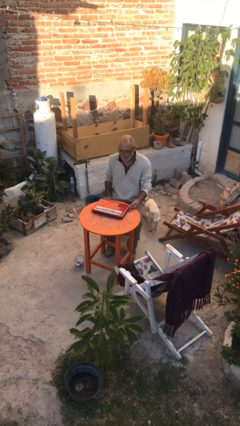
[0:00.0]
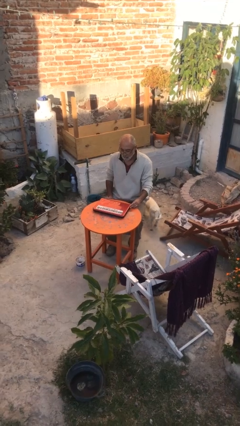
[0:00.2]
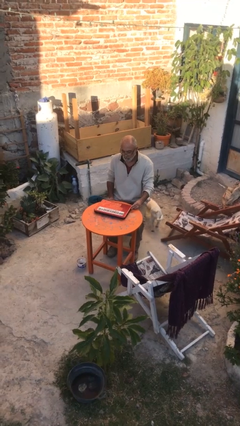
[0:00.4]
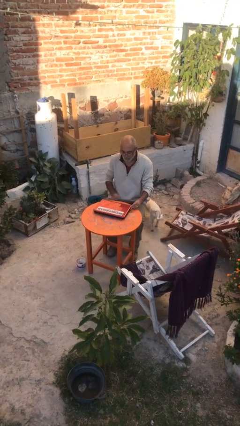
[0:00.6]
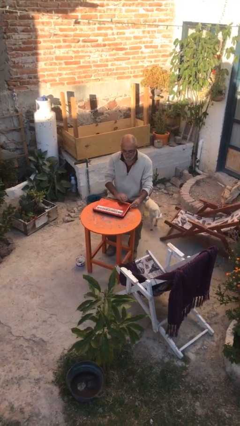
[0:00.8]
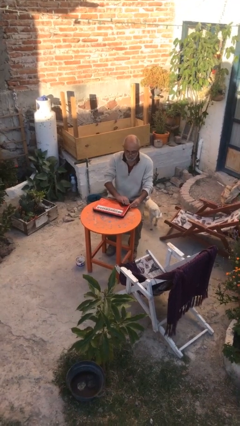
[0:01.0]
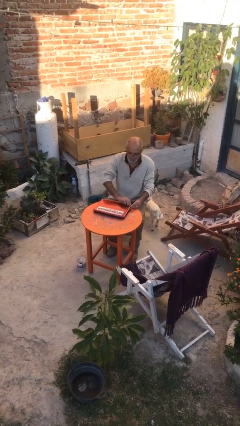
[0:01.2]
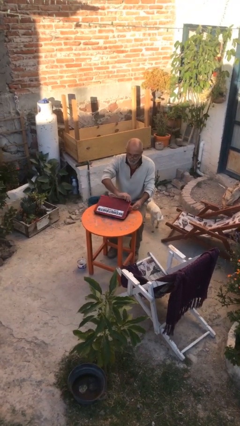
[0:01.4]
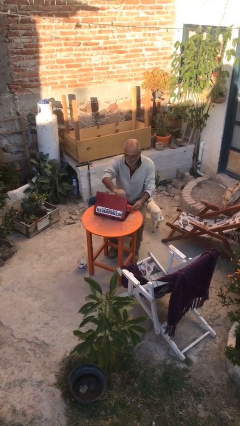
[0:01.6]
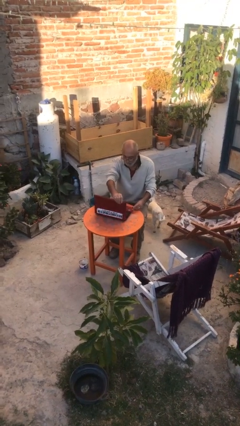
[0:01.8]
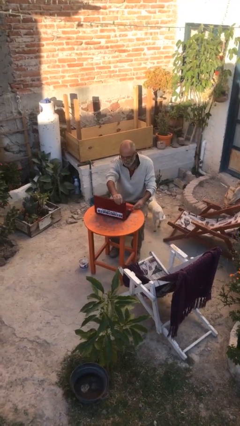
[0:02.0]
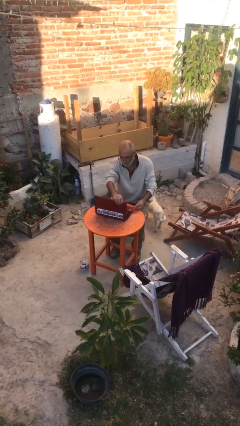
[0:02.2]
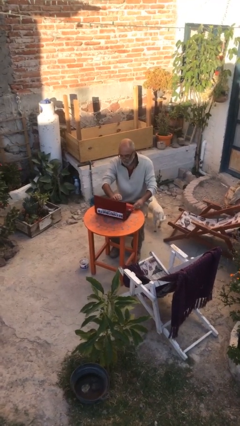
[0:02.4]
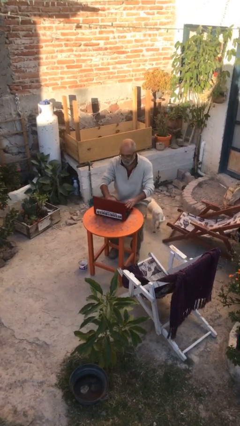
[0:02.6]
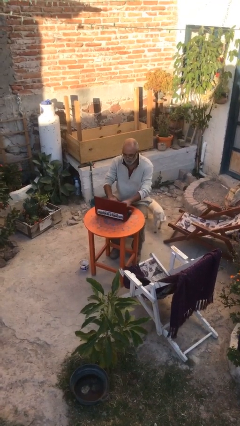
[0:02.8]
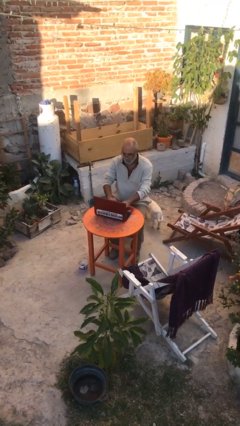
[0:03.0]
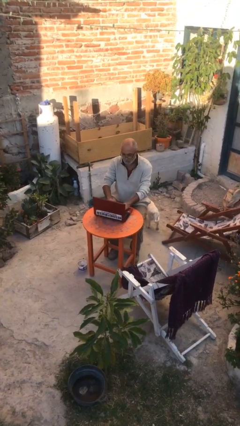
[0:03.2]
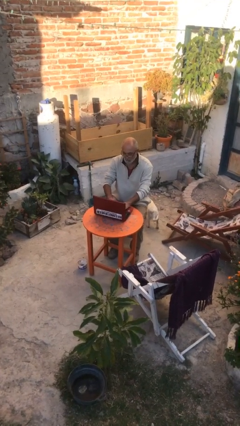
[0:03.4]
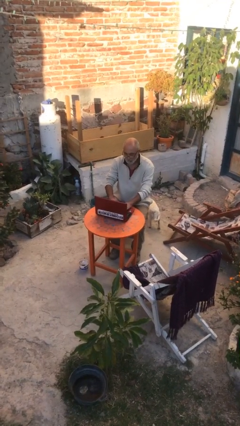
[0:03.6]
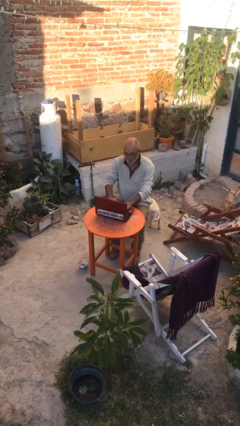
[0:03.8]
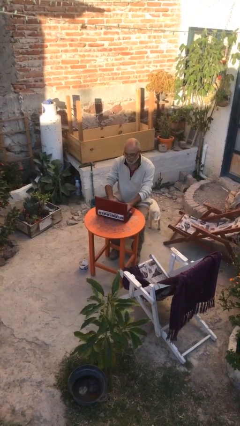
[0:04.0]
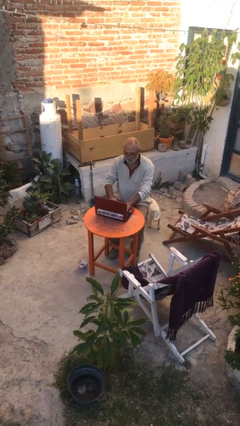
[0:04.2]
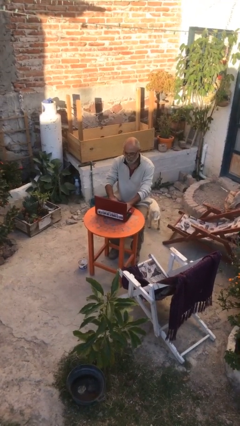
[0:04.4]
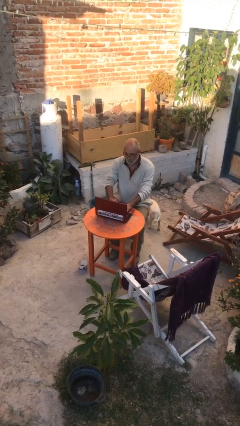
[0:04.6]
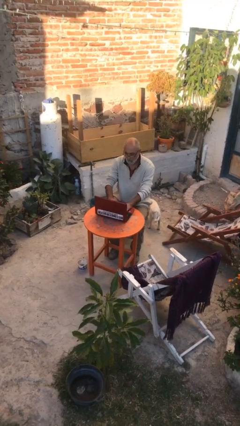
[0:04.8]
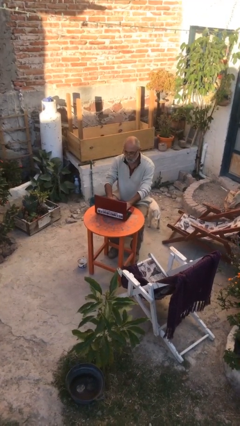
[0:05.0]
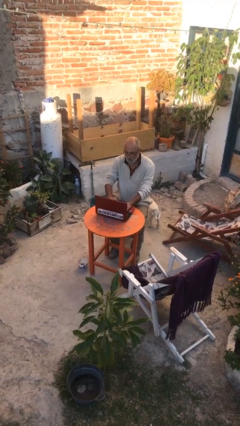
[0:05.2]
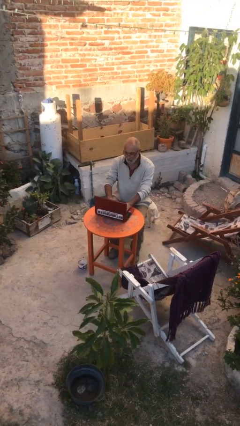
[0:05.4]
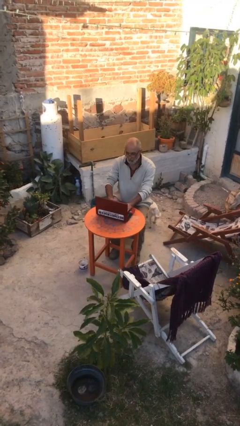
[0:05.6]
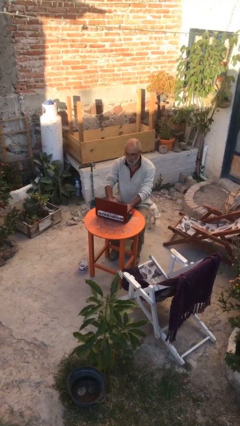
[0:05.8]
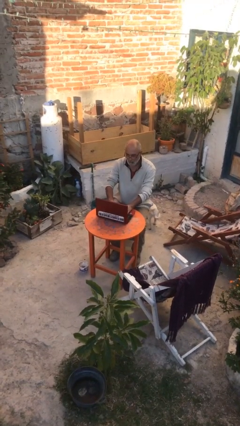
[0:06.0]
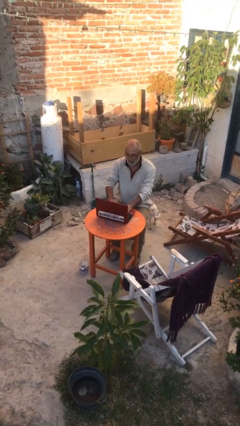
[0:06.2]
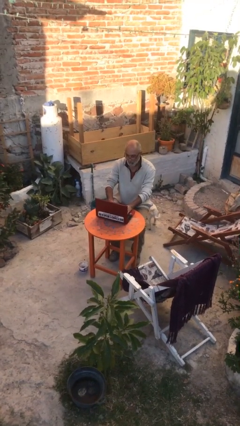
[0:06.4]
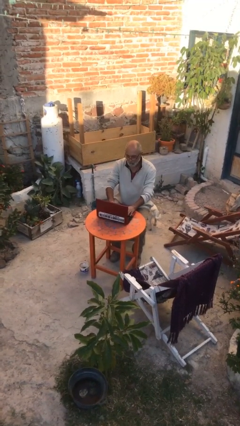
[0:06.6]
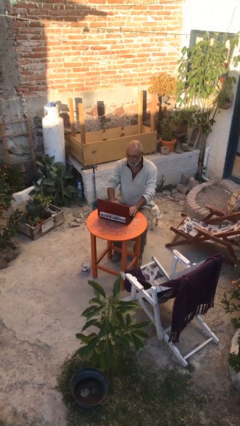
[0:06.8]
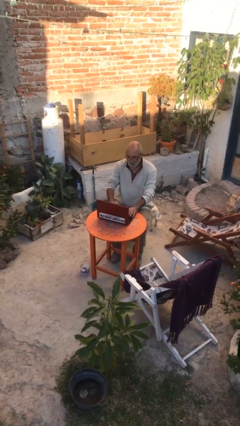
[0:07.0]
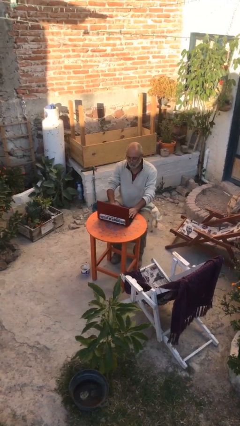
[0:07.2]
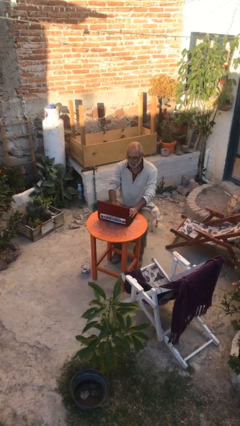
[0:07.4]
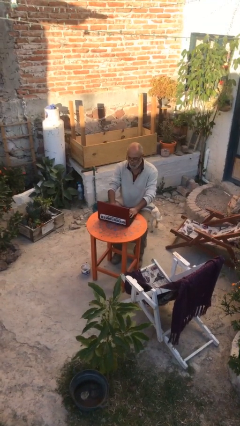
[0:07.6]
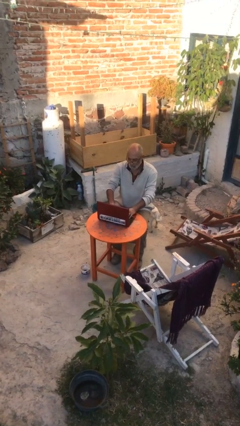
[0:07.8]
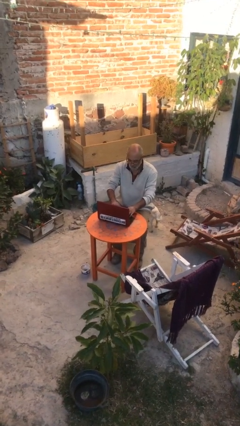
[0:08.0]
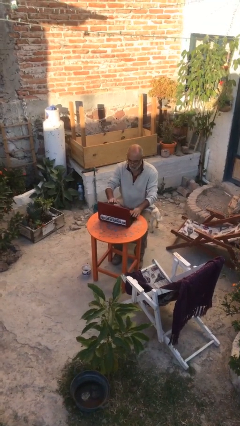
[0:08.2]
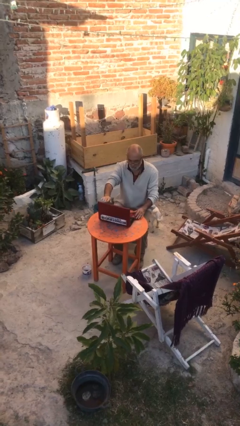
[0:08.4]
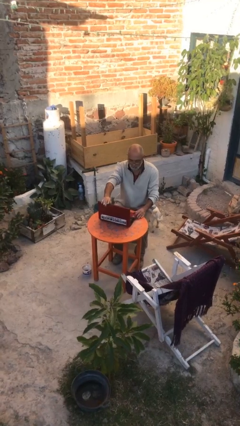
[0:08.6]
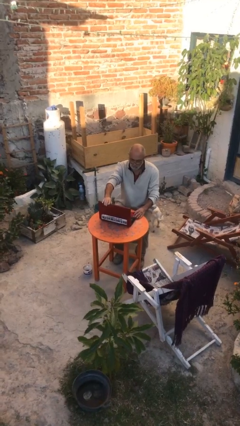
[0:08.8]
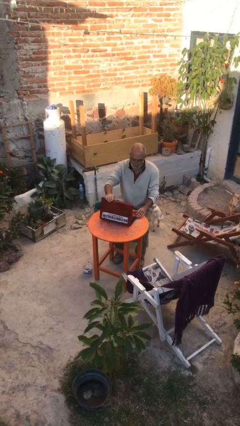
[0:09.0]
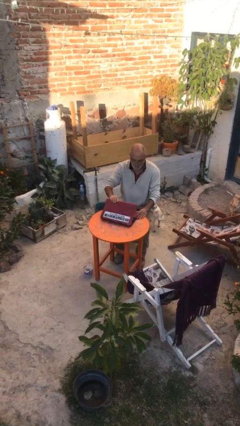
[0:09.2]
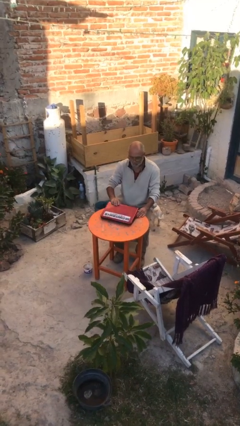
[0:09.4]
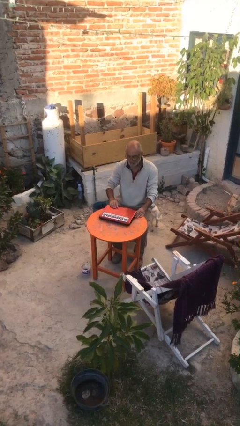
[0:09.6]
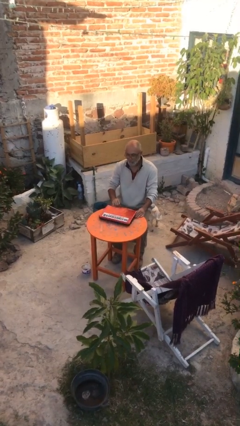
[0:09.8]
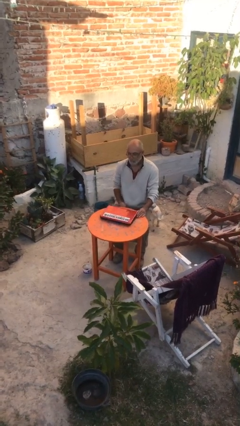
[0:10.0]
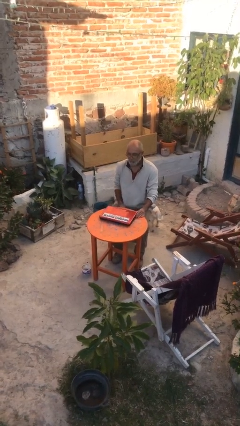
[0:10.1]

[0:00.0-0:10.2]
person interacts with laptop

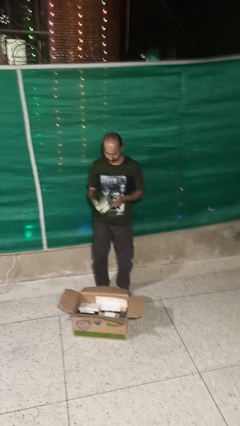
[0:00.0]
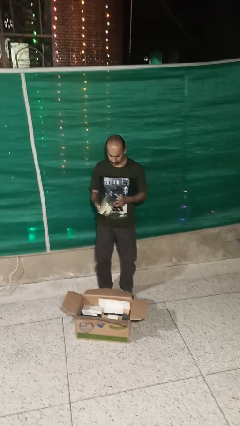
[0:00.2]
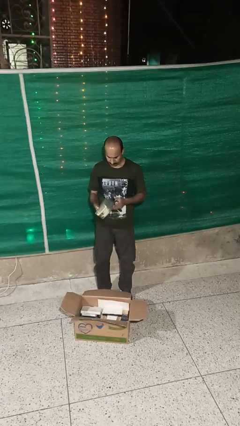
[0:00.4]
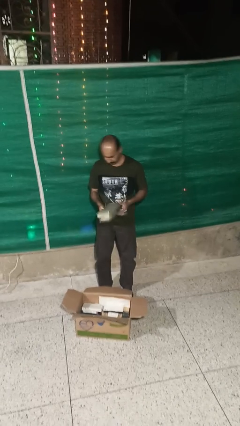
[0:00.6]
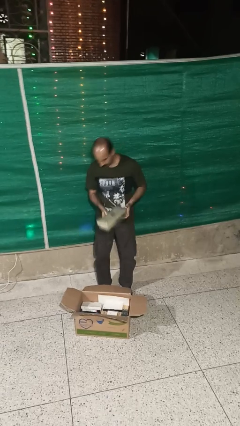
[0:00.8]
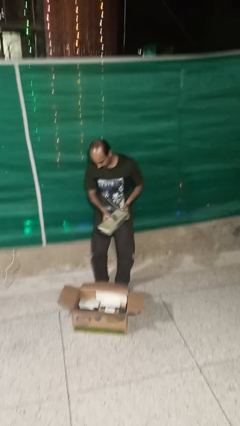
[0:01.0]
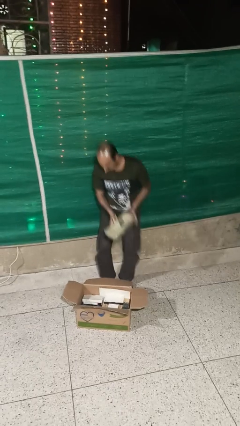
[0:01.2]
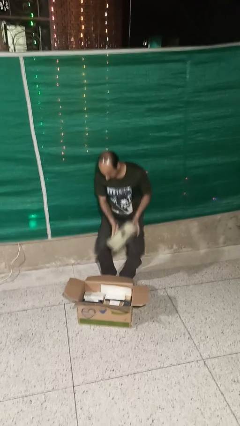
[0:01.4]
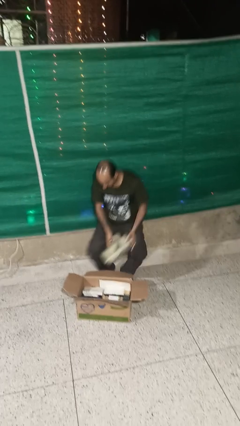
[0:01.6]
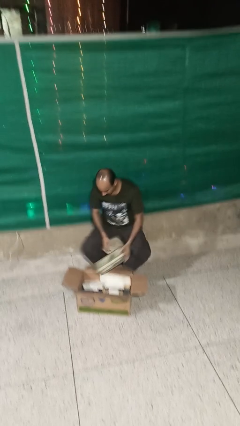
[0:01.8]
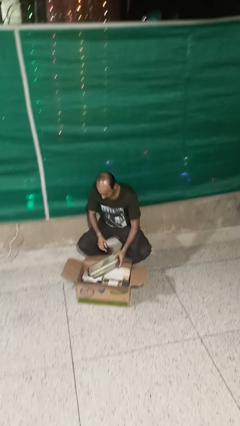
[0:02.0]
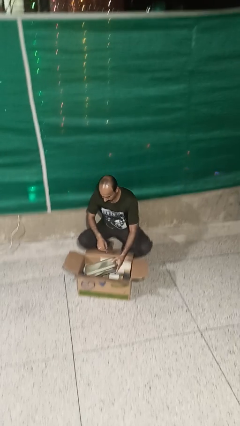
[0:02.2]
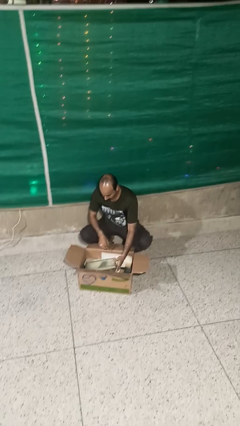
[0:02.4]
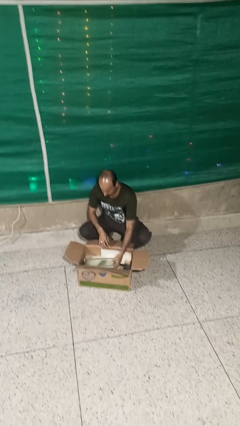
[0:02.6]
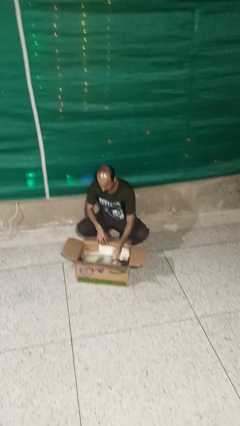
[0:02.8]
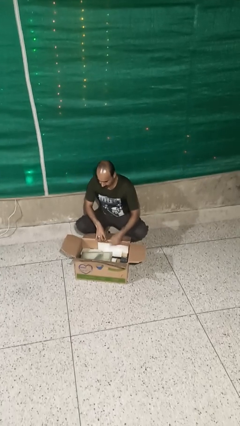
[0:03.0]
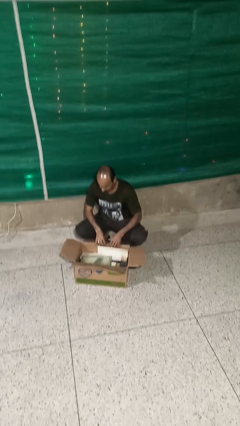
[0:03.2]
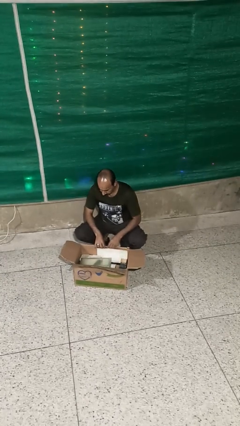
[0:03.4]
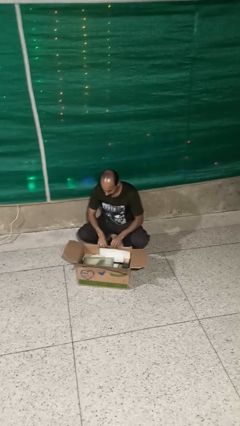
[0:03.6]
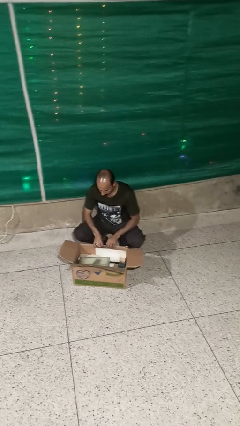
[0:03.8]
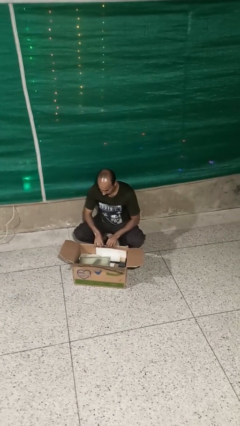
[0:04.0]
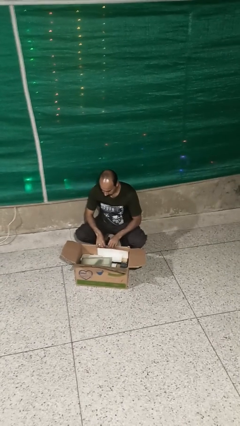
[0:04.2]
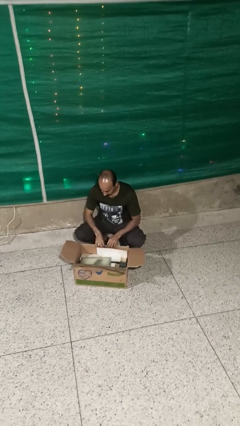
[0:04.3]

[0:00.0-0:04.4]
person puts object into box

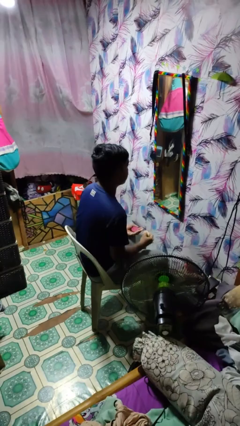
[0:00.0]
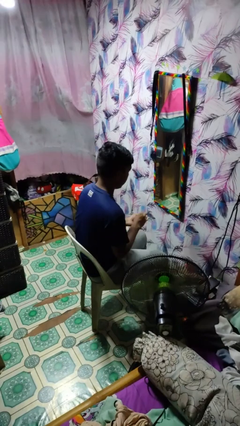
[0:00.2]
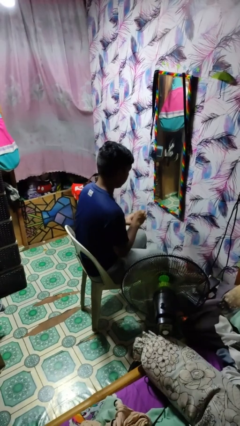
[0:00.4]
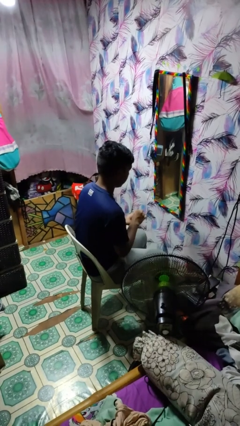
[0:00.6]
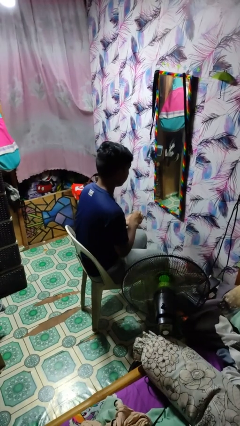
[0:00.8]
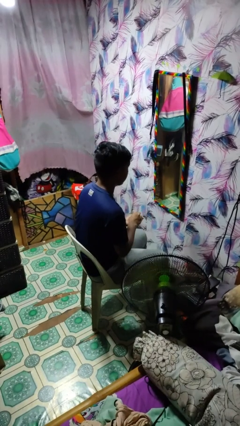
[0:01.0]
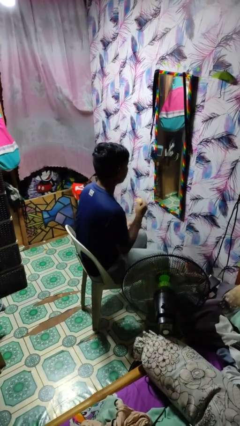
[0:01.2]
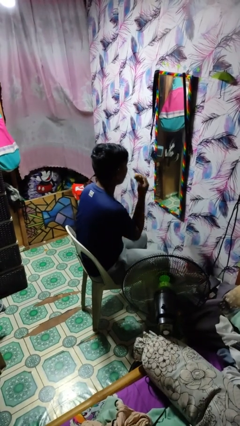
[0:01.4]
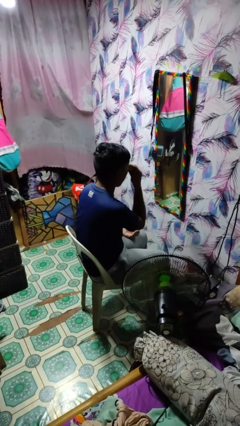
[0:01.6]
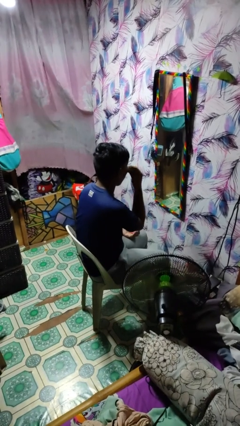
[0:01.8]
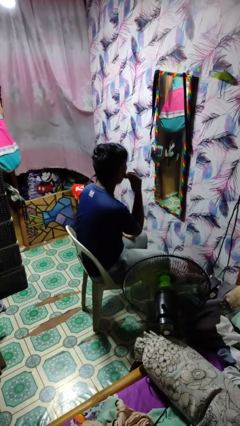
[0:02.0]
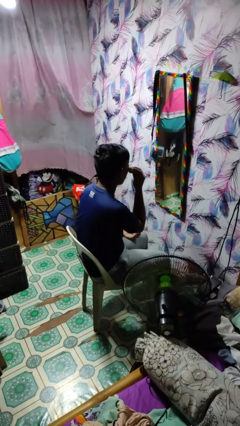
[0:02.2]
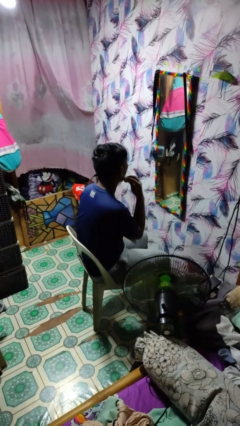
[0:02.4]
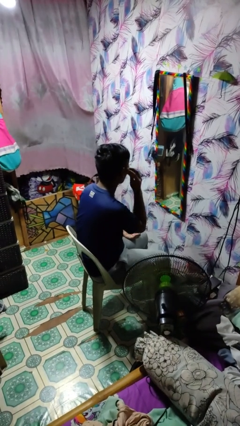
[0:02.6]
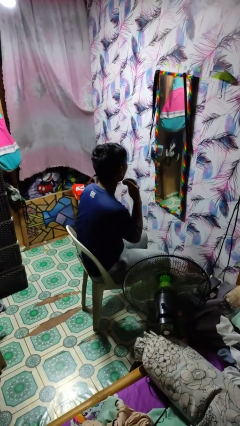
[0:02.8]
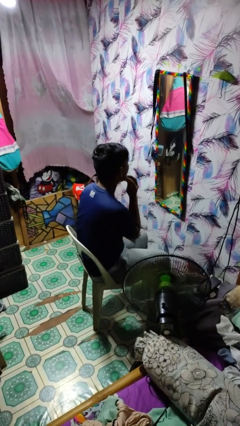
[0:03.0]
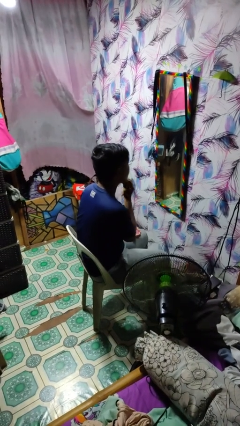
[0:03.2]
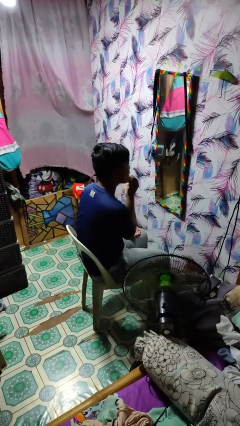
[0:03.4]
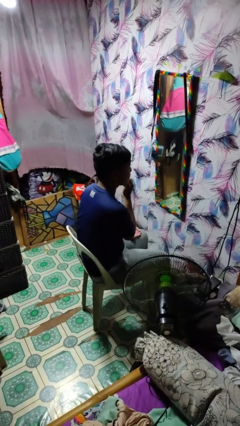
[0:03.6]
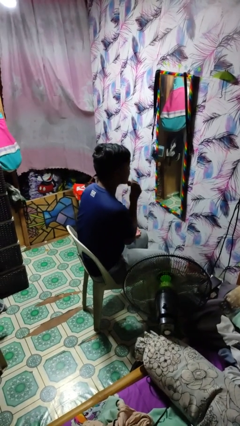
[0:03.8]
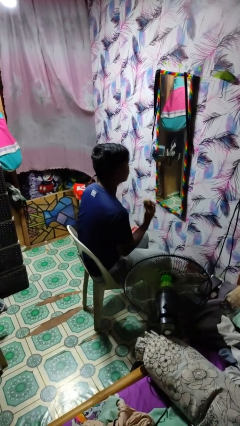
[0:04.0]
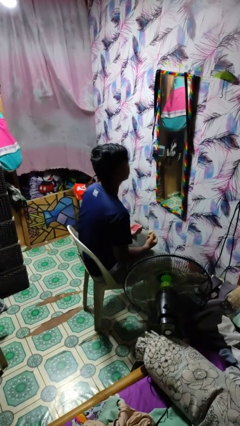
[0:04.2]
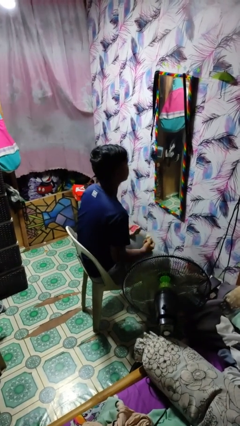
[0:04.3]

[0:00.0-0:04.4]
person applies foundation makeup
